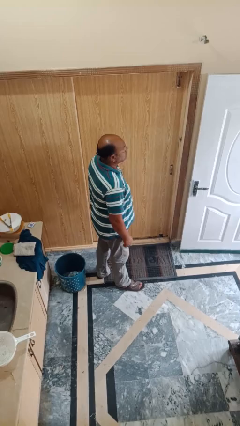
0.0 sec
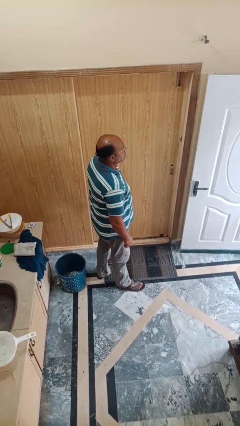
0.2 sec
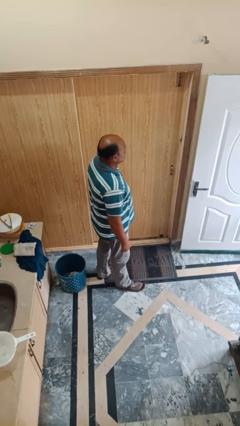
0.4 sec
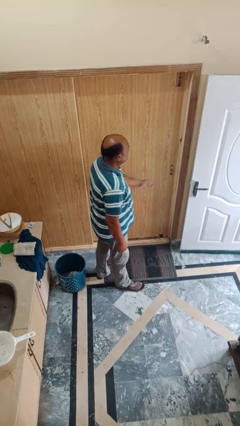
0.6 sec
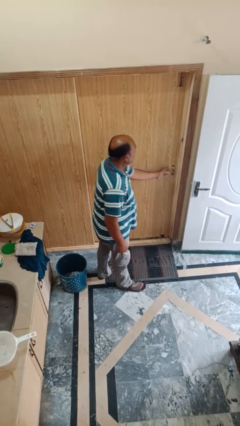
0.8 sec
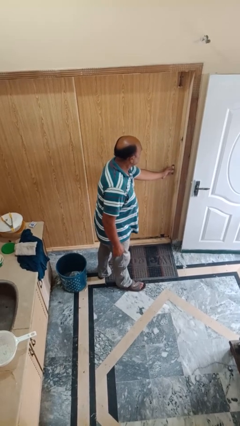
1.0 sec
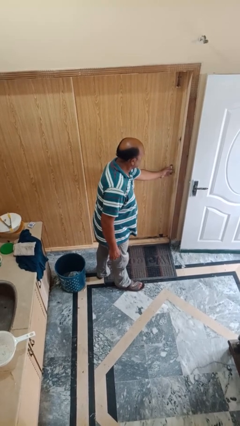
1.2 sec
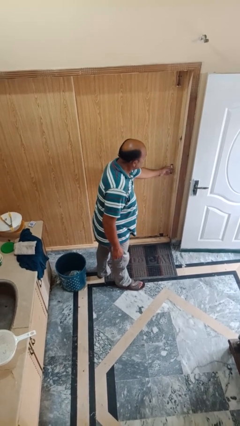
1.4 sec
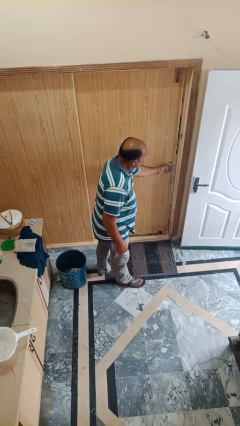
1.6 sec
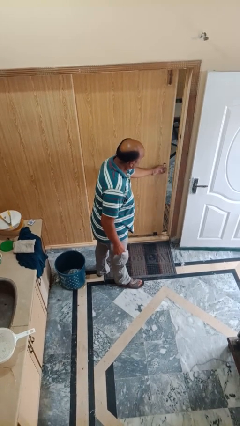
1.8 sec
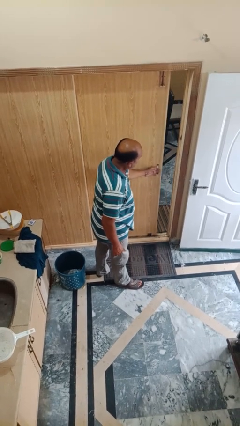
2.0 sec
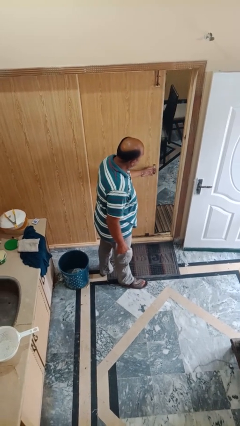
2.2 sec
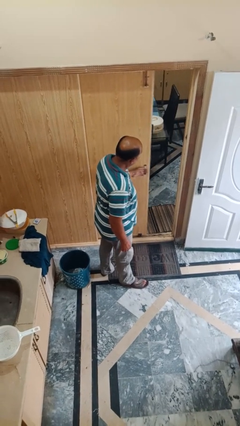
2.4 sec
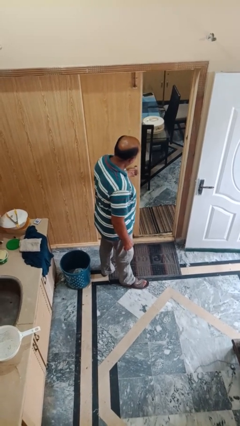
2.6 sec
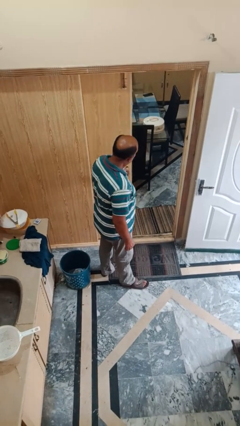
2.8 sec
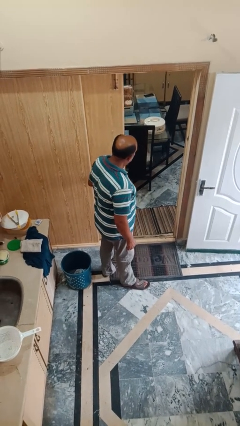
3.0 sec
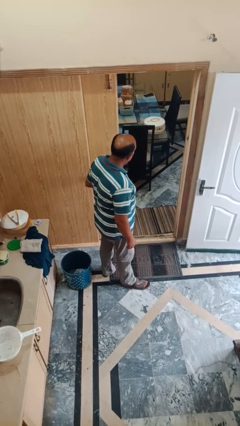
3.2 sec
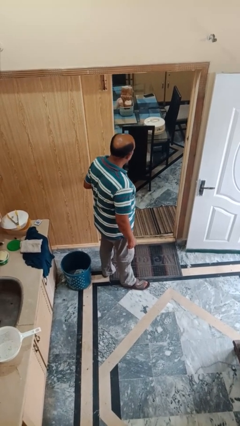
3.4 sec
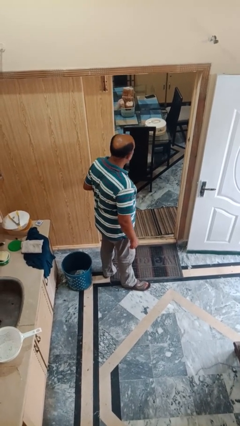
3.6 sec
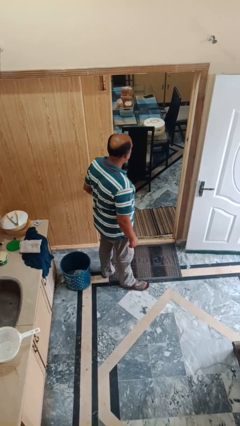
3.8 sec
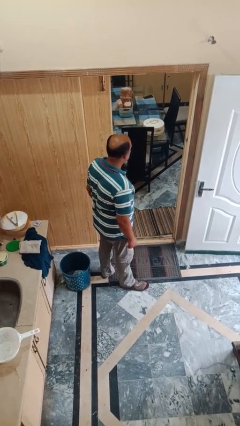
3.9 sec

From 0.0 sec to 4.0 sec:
person opens sliding door

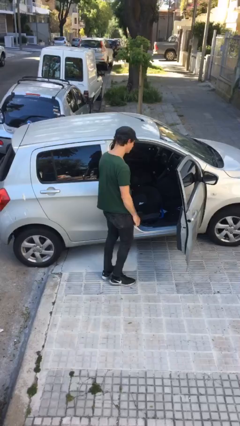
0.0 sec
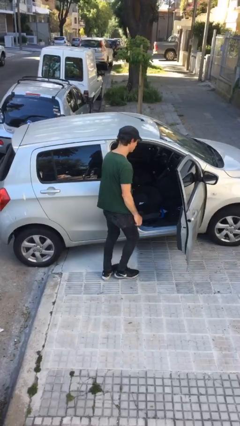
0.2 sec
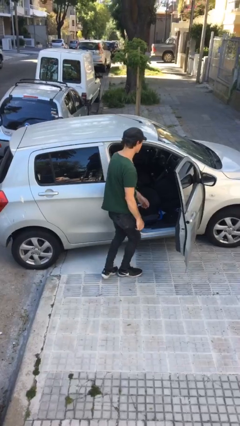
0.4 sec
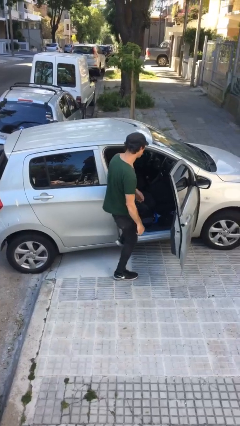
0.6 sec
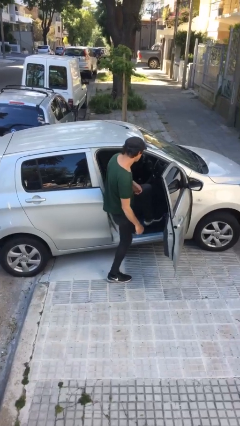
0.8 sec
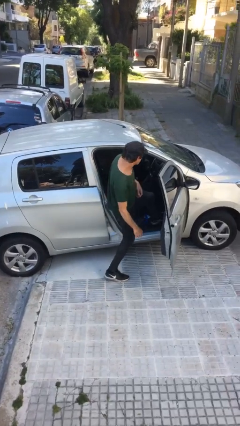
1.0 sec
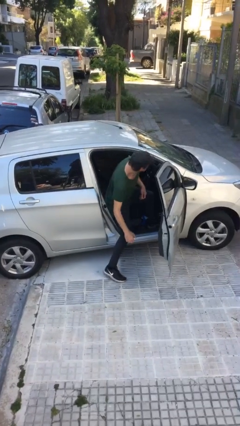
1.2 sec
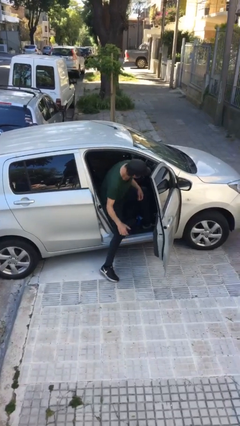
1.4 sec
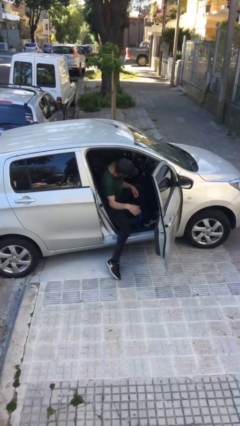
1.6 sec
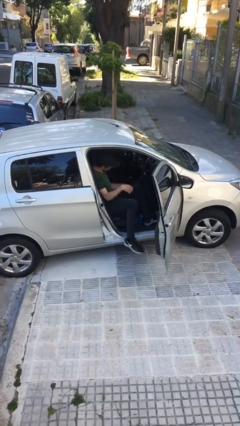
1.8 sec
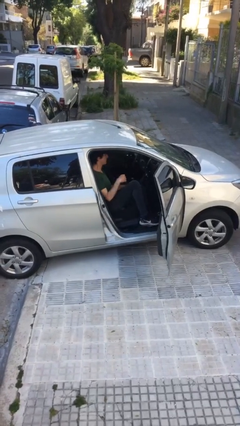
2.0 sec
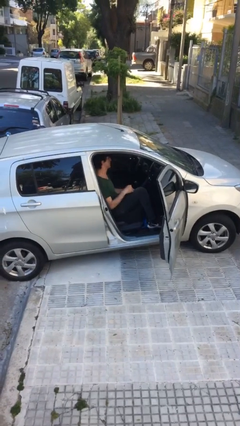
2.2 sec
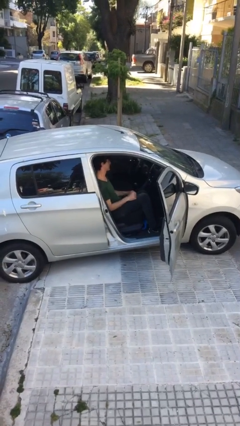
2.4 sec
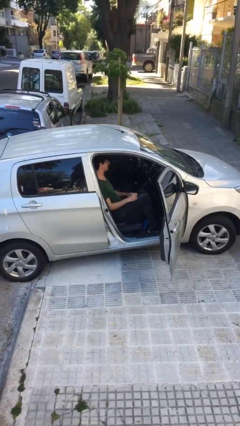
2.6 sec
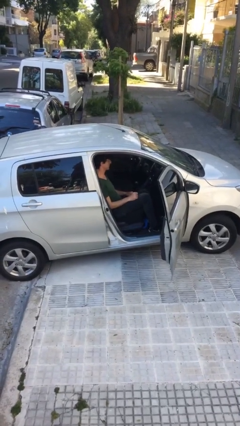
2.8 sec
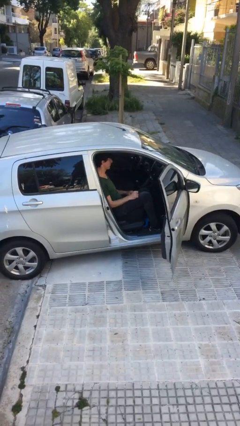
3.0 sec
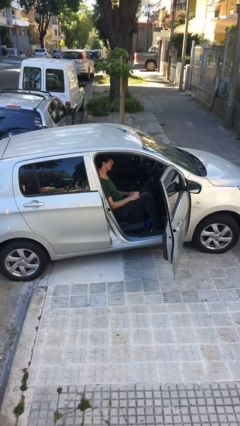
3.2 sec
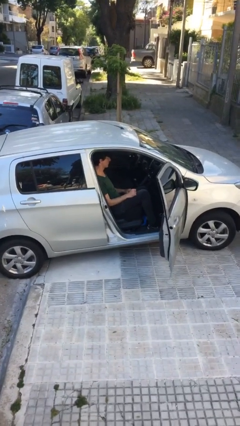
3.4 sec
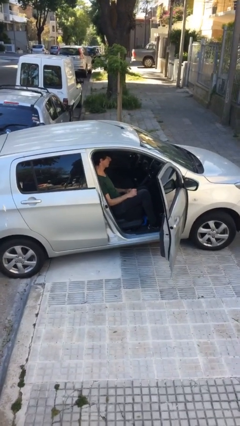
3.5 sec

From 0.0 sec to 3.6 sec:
person enters car

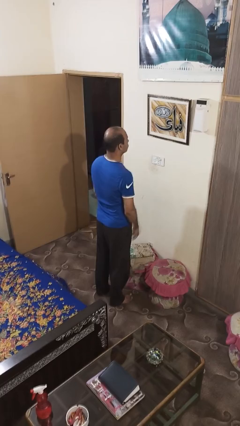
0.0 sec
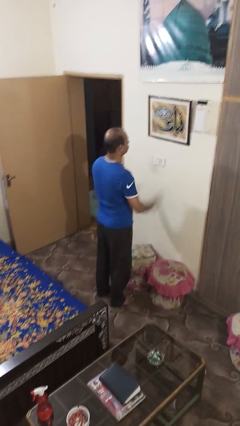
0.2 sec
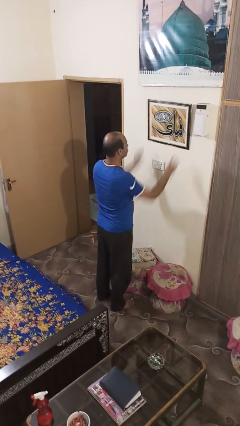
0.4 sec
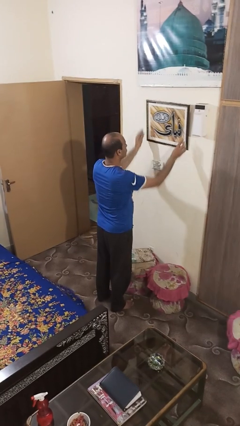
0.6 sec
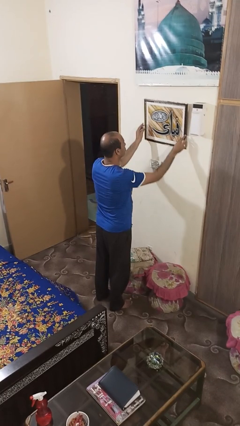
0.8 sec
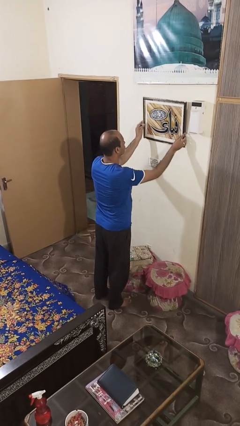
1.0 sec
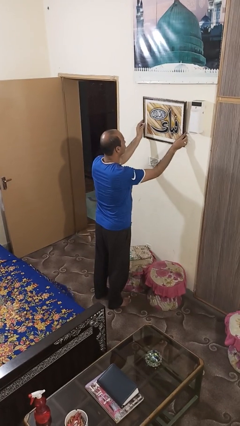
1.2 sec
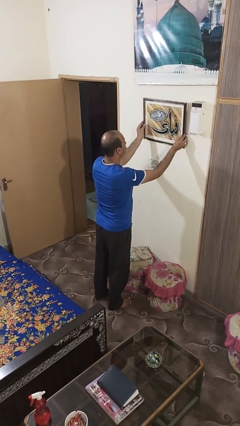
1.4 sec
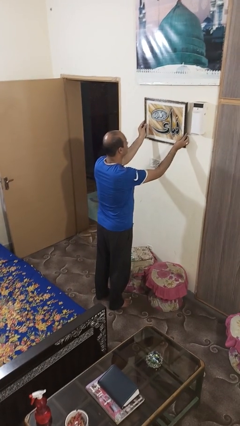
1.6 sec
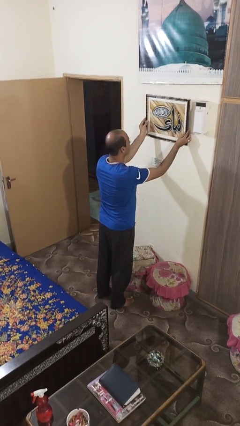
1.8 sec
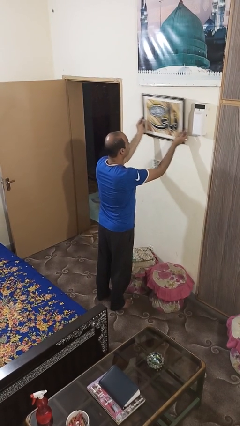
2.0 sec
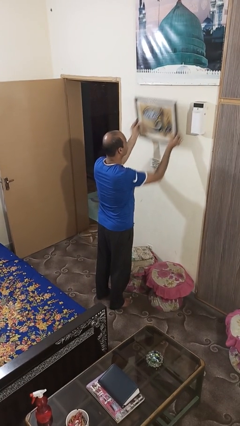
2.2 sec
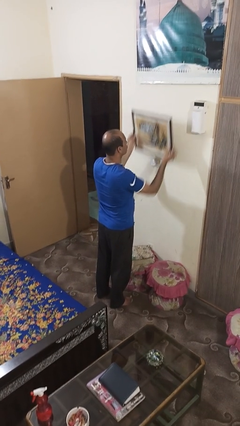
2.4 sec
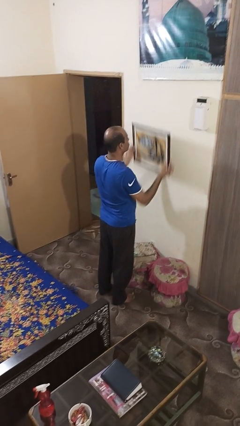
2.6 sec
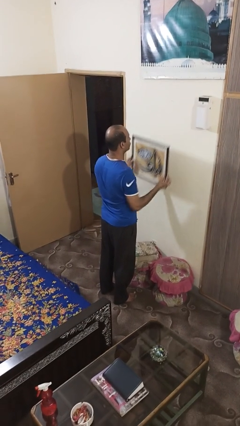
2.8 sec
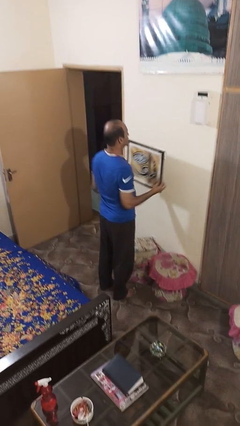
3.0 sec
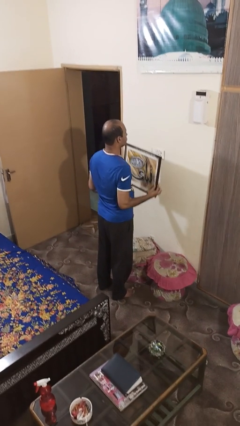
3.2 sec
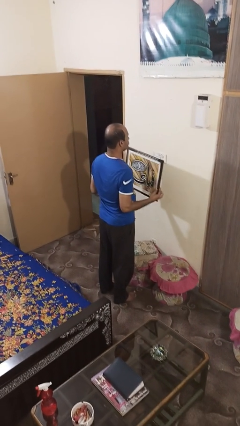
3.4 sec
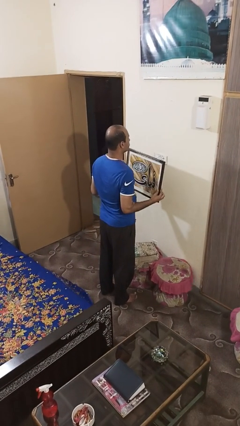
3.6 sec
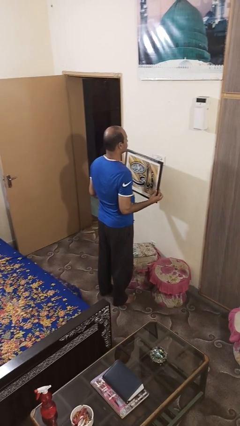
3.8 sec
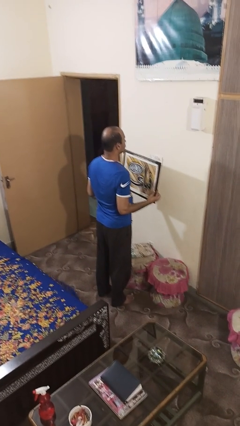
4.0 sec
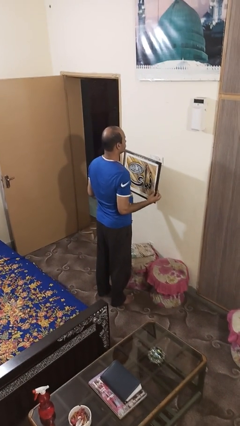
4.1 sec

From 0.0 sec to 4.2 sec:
person takes down picture frame

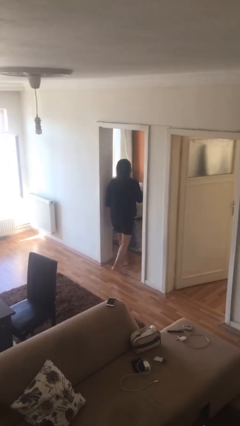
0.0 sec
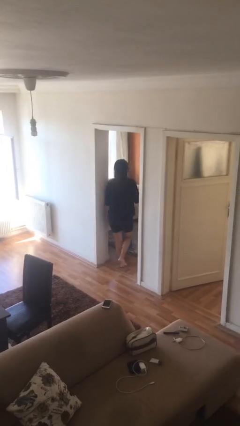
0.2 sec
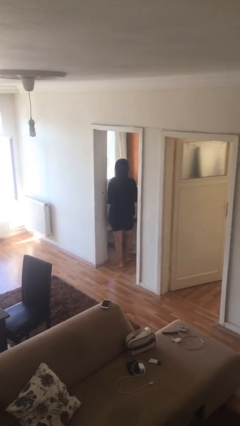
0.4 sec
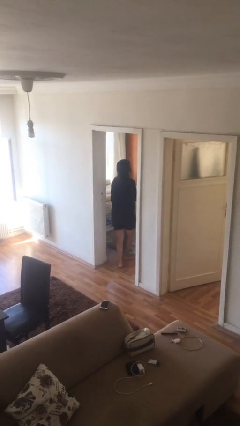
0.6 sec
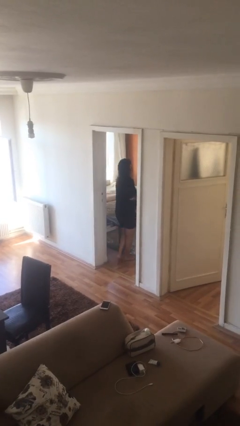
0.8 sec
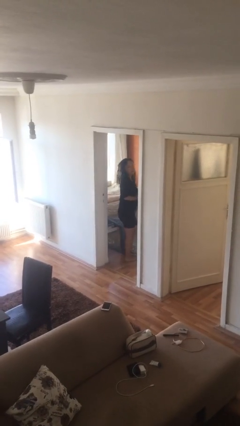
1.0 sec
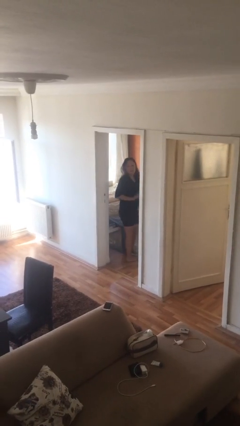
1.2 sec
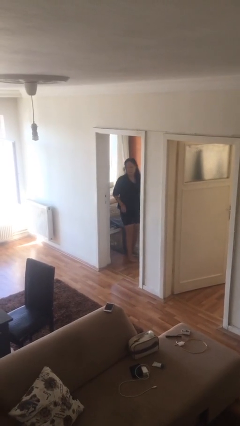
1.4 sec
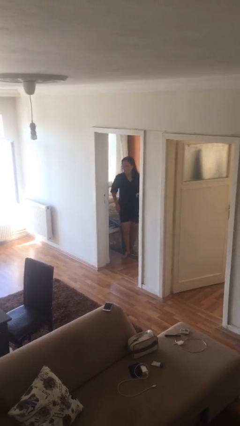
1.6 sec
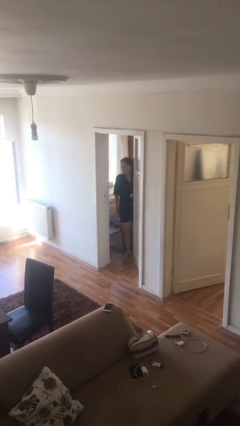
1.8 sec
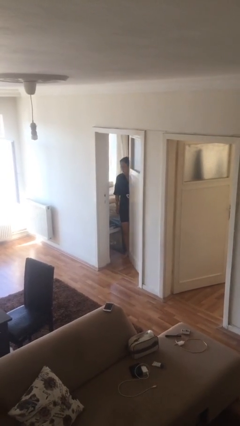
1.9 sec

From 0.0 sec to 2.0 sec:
person exits scene through structure

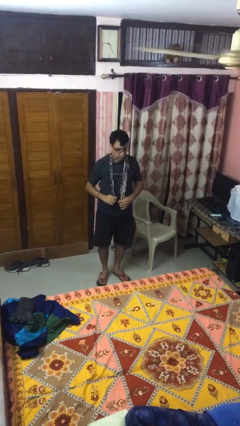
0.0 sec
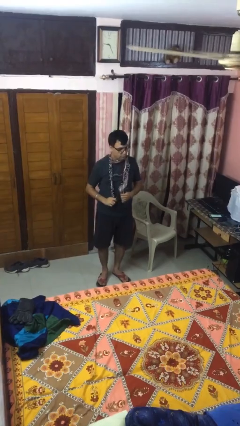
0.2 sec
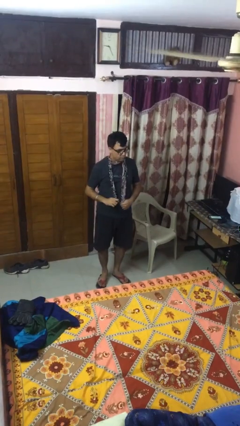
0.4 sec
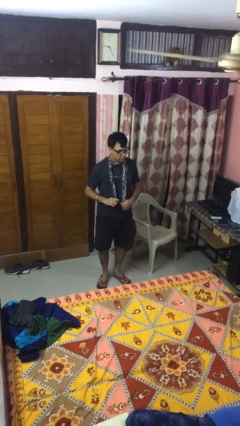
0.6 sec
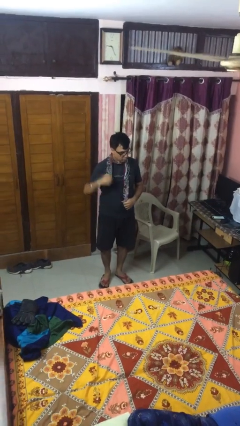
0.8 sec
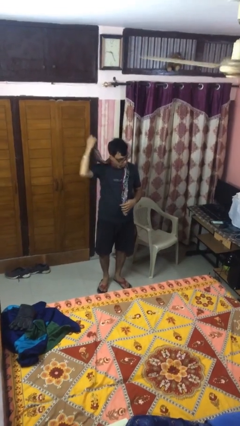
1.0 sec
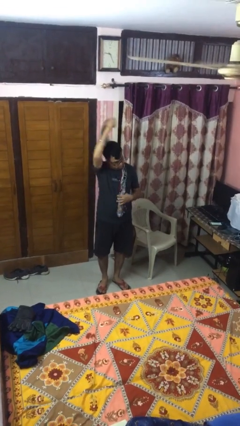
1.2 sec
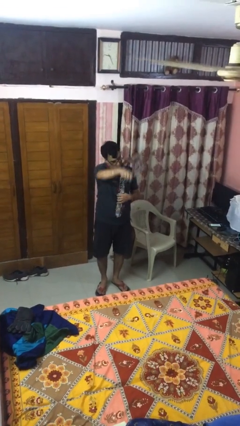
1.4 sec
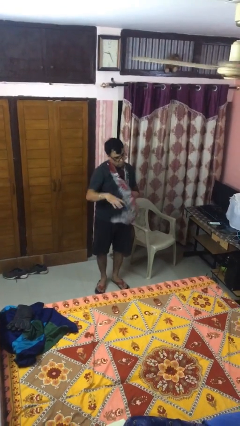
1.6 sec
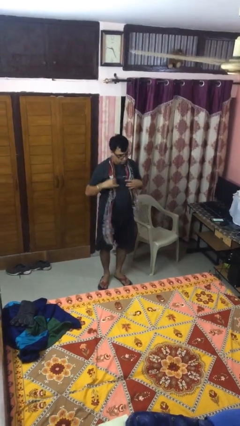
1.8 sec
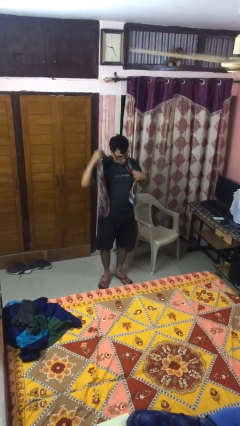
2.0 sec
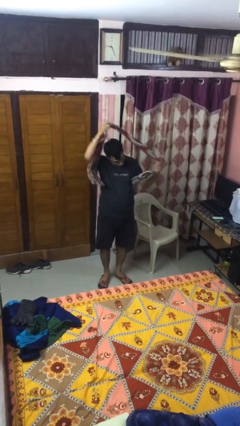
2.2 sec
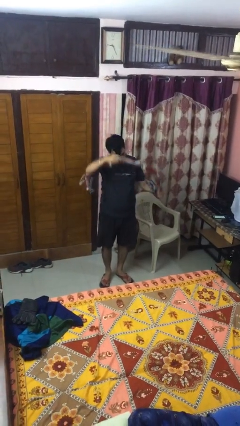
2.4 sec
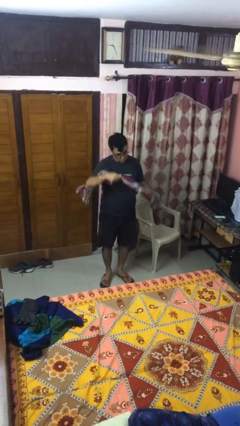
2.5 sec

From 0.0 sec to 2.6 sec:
person takes off scarf

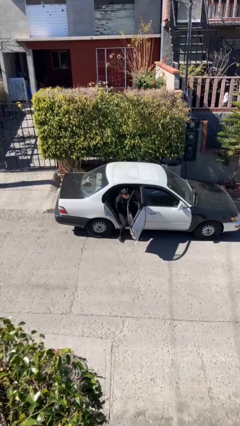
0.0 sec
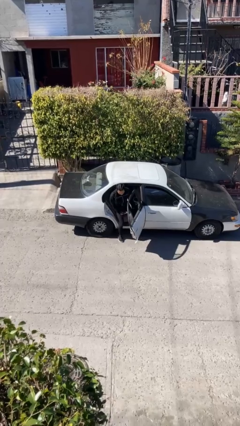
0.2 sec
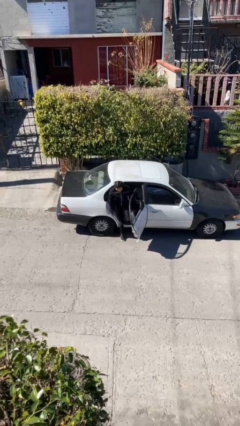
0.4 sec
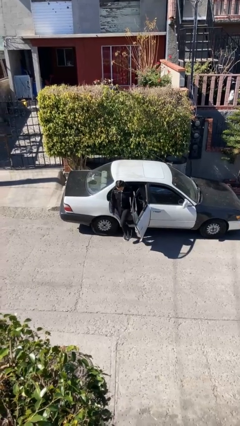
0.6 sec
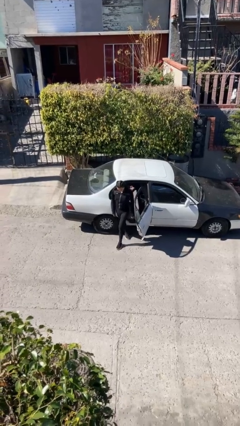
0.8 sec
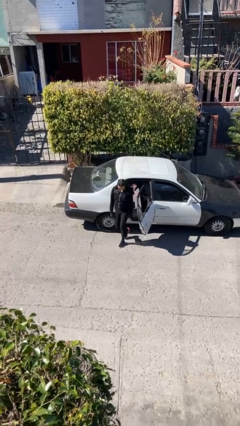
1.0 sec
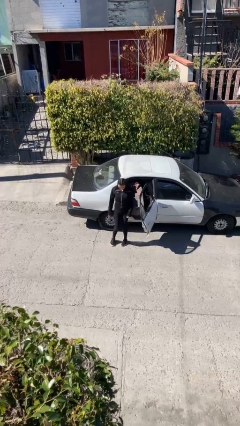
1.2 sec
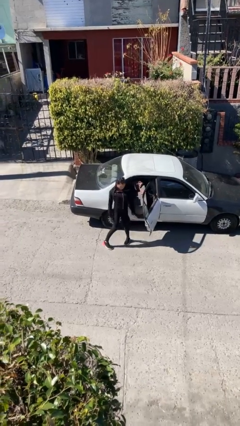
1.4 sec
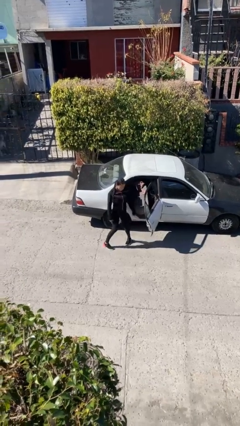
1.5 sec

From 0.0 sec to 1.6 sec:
person exits car
